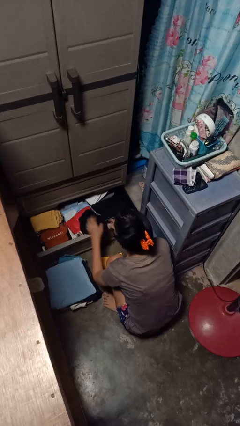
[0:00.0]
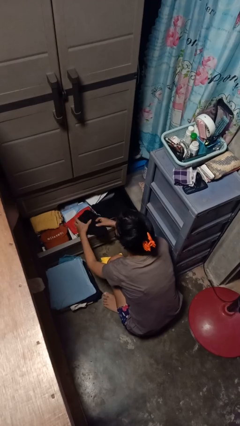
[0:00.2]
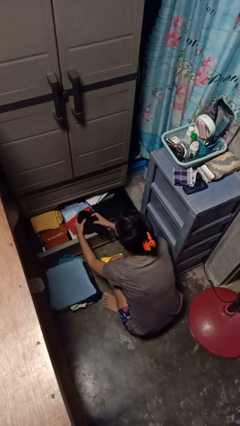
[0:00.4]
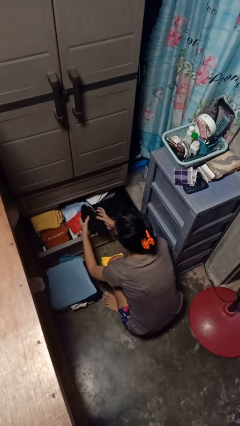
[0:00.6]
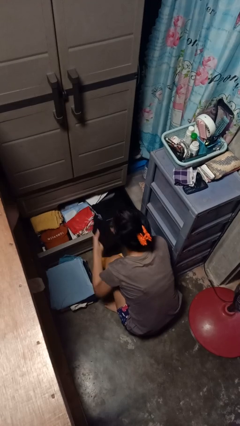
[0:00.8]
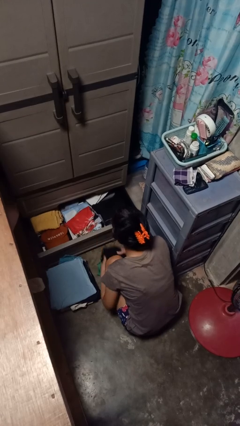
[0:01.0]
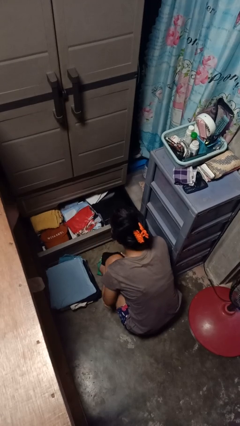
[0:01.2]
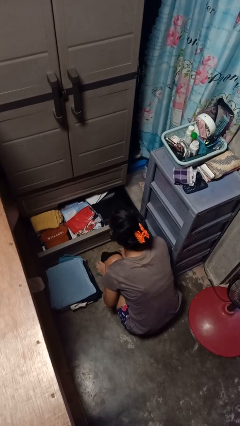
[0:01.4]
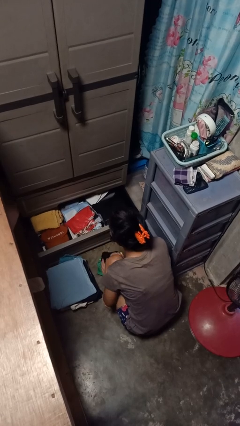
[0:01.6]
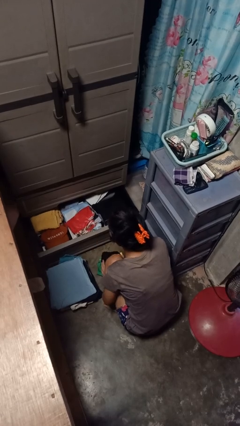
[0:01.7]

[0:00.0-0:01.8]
person takes clothes from dresser

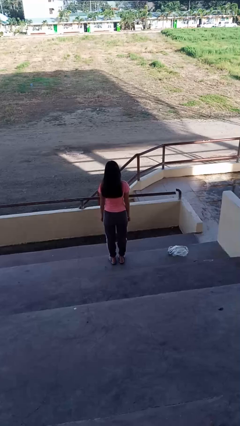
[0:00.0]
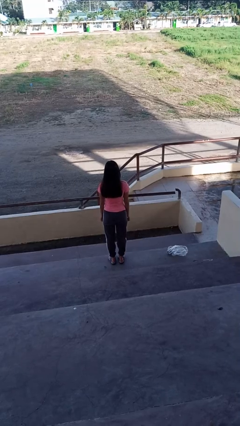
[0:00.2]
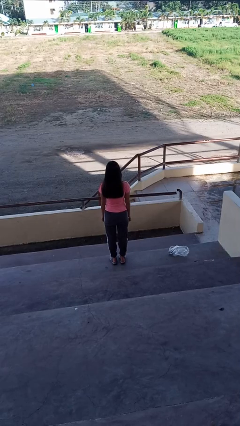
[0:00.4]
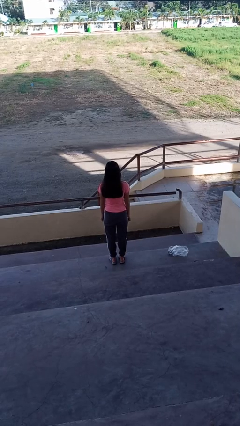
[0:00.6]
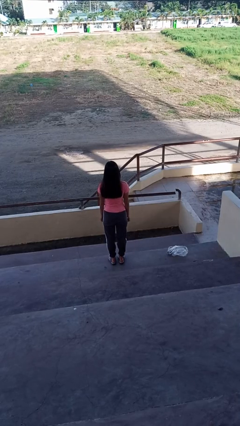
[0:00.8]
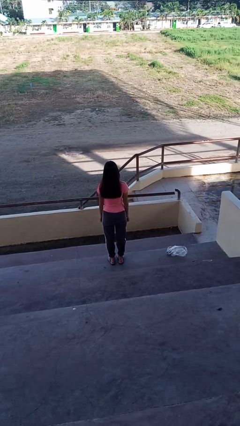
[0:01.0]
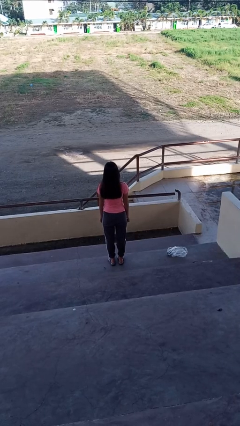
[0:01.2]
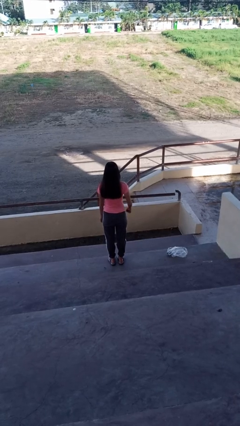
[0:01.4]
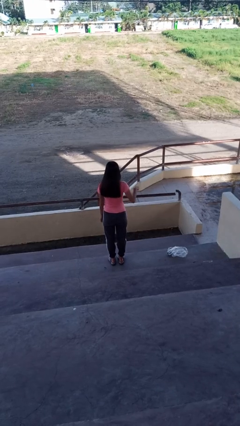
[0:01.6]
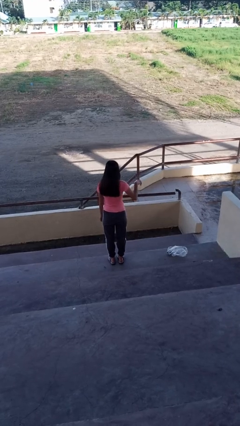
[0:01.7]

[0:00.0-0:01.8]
person drops object

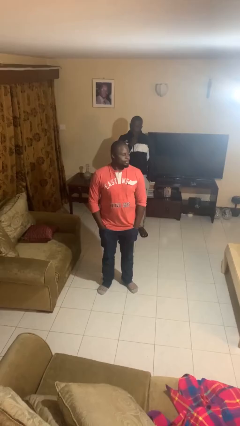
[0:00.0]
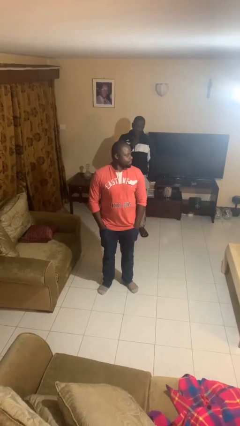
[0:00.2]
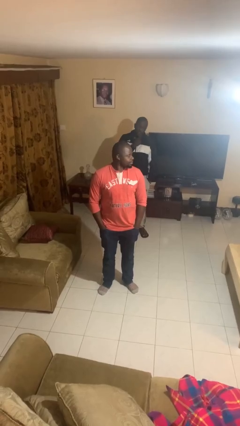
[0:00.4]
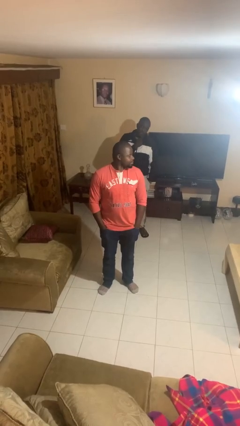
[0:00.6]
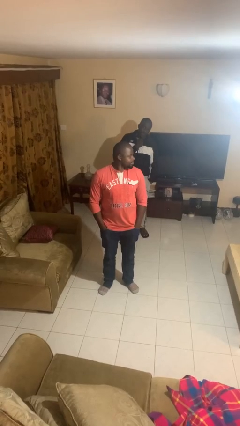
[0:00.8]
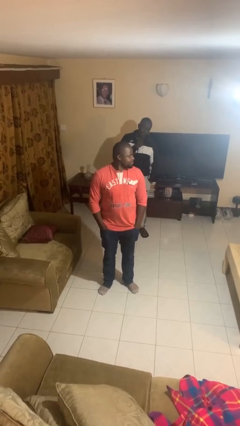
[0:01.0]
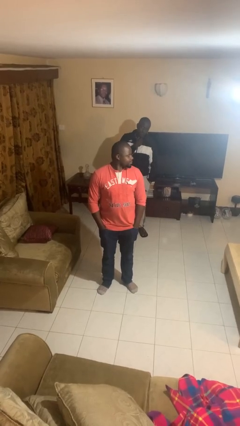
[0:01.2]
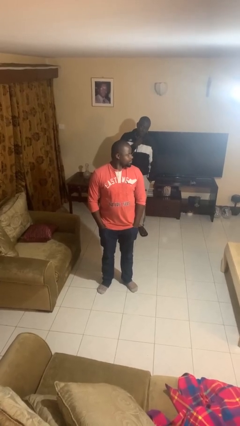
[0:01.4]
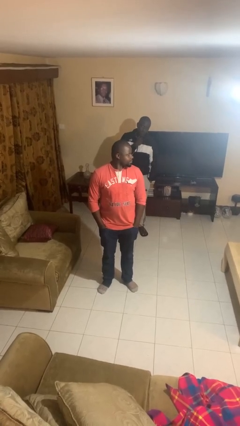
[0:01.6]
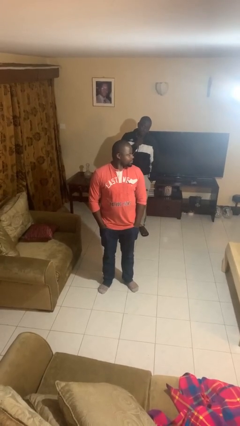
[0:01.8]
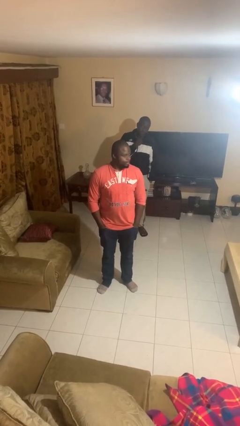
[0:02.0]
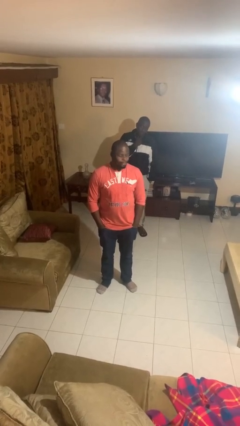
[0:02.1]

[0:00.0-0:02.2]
person looks over shoulder

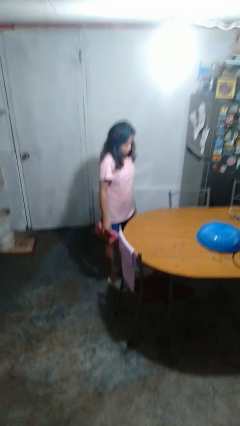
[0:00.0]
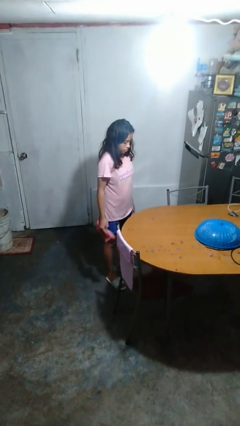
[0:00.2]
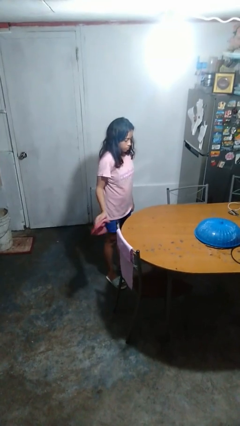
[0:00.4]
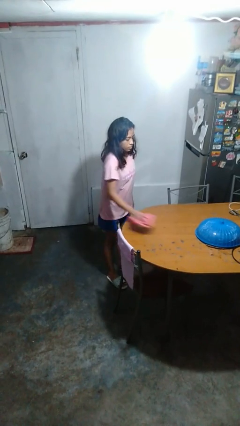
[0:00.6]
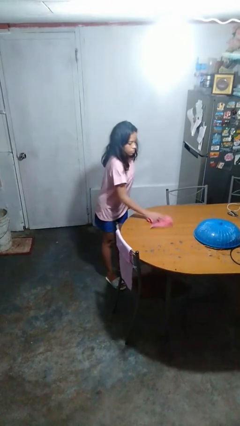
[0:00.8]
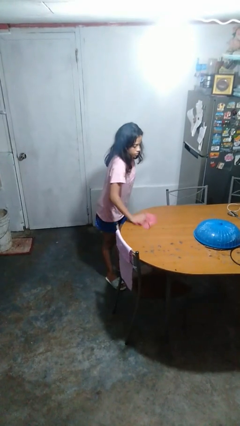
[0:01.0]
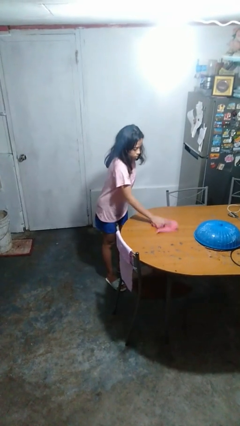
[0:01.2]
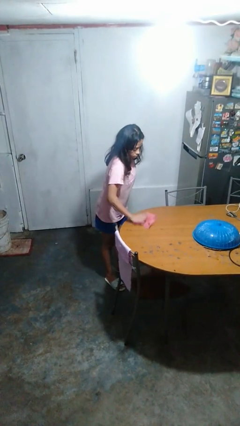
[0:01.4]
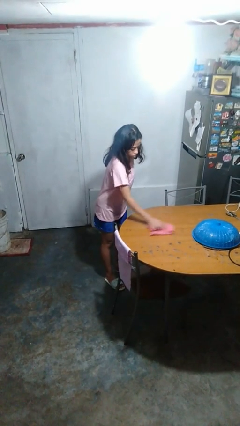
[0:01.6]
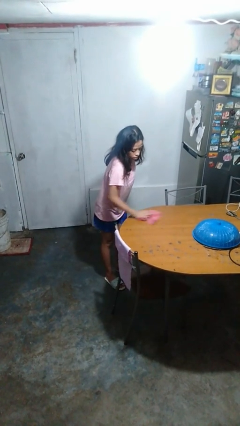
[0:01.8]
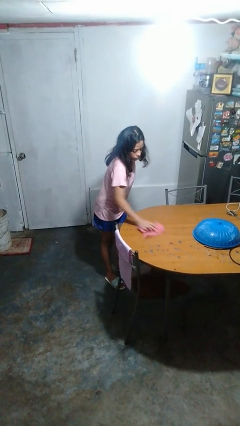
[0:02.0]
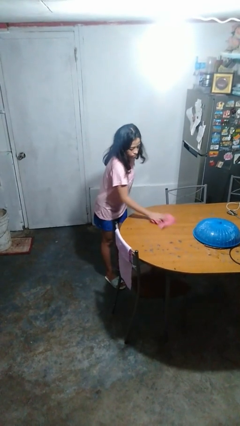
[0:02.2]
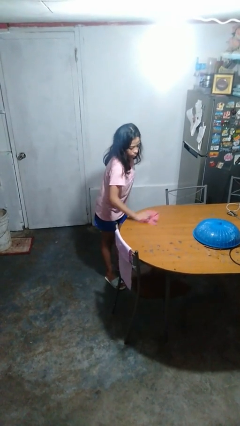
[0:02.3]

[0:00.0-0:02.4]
person cleans table with rag

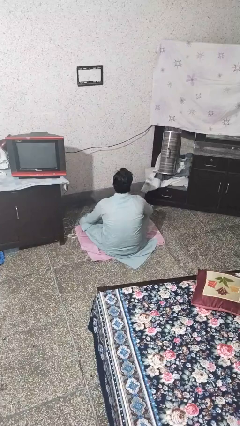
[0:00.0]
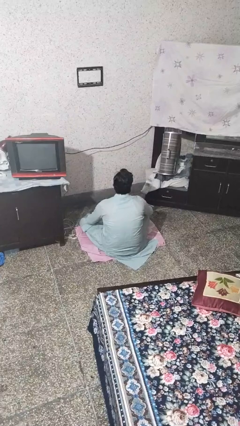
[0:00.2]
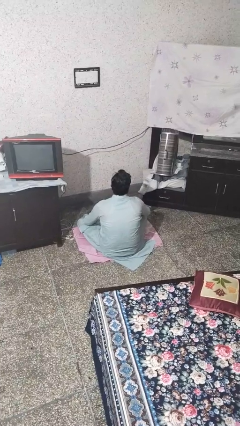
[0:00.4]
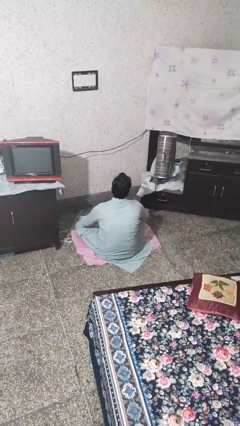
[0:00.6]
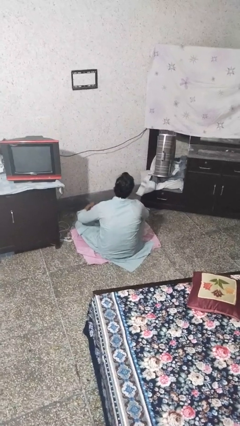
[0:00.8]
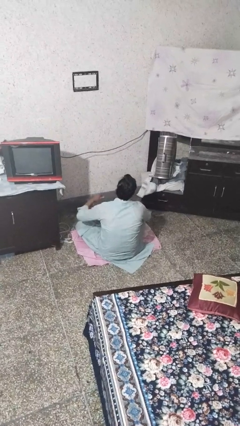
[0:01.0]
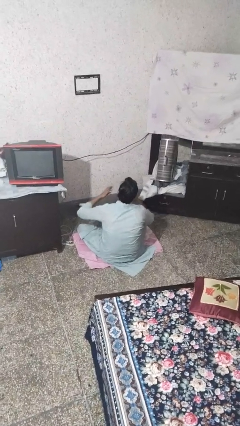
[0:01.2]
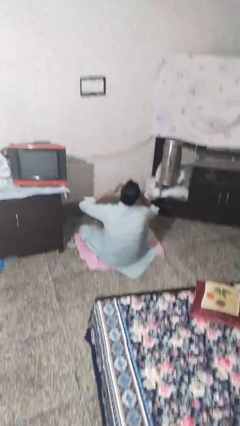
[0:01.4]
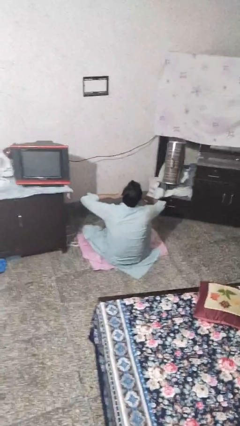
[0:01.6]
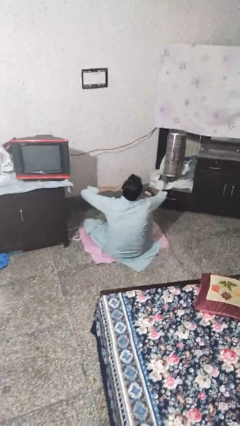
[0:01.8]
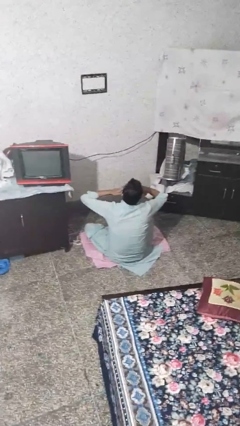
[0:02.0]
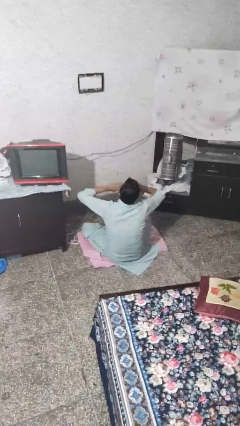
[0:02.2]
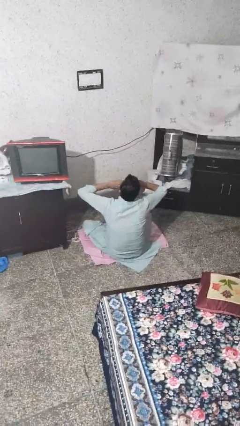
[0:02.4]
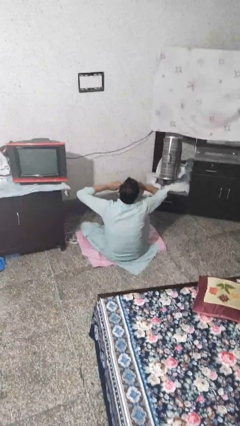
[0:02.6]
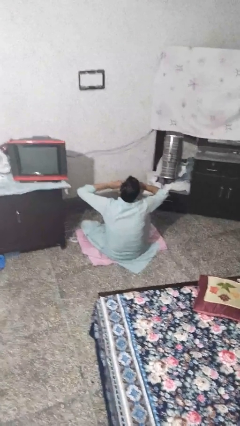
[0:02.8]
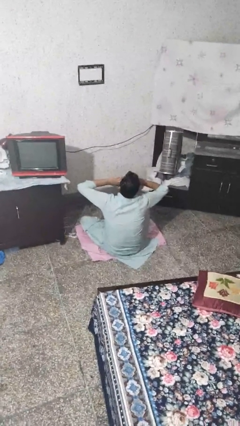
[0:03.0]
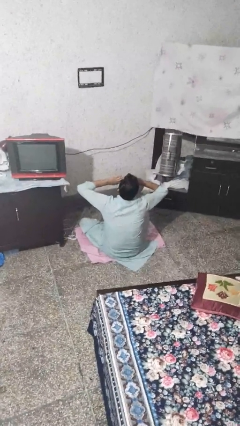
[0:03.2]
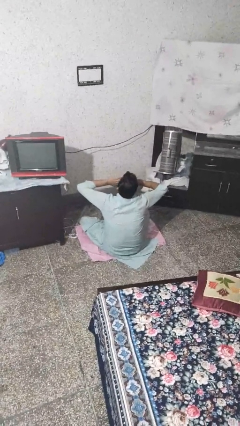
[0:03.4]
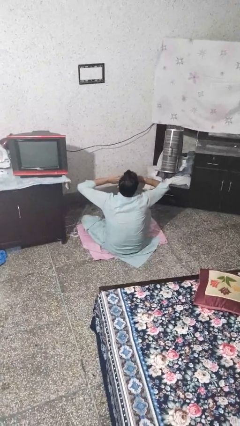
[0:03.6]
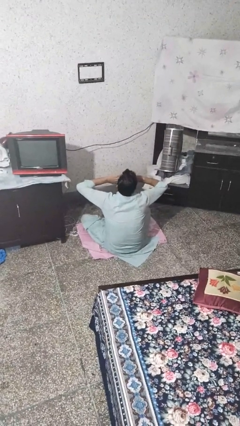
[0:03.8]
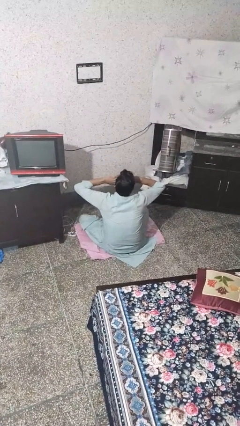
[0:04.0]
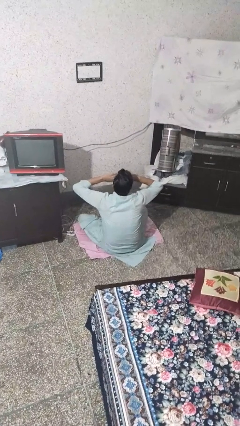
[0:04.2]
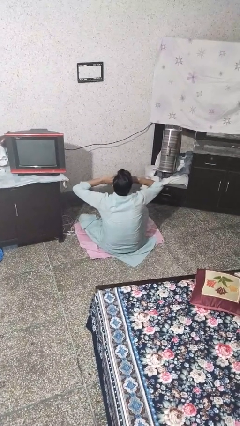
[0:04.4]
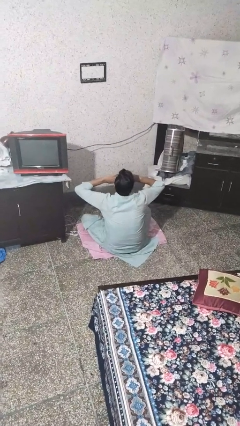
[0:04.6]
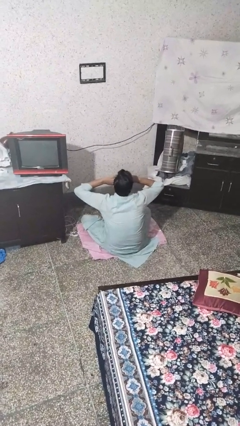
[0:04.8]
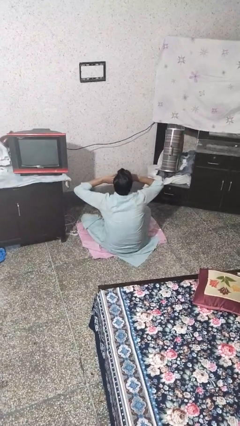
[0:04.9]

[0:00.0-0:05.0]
person yawns

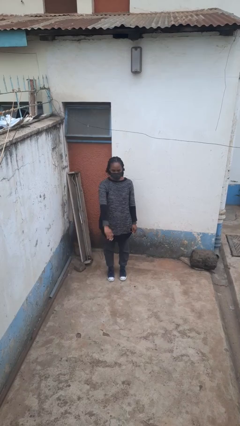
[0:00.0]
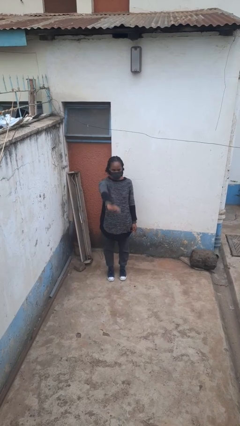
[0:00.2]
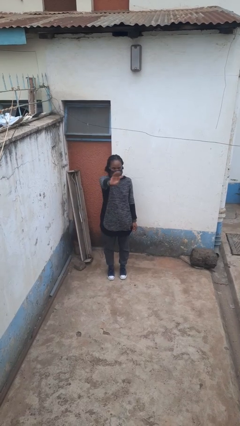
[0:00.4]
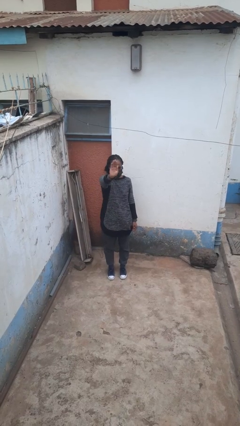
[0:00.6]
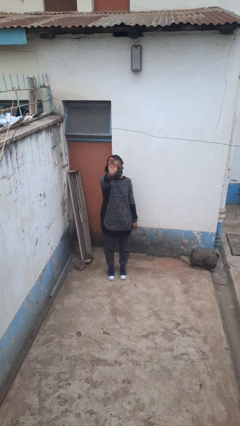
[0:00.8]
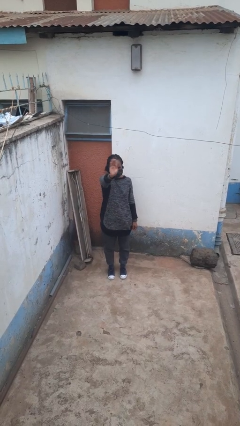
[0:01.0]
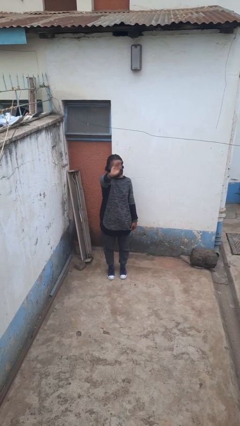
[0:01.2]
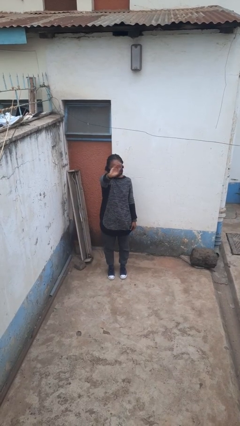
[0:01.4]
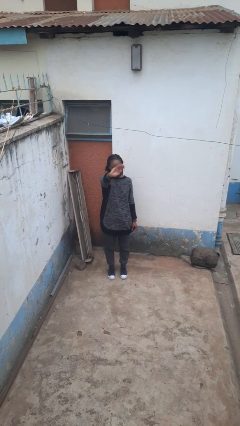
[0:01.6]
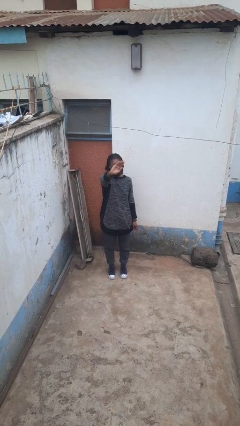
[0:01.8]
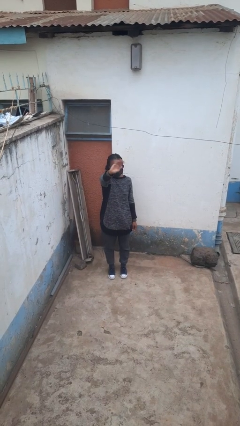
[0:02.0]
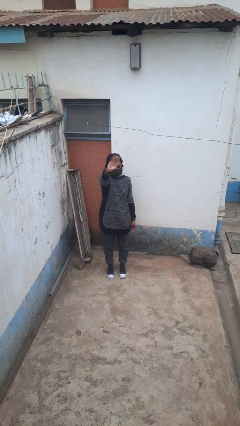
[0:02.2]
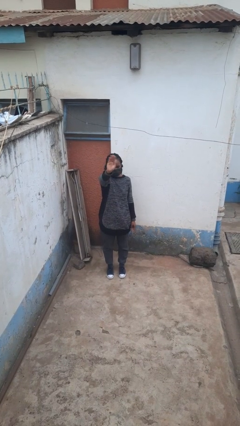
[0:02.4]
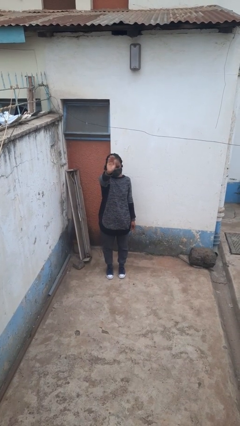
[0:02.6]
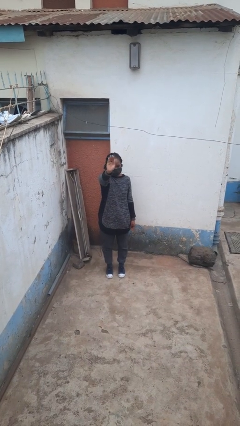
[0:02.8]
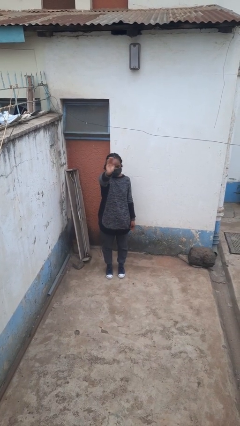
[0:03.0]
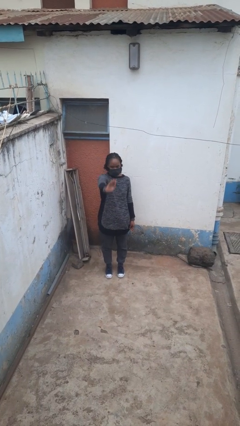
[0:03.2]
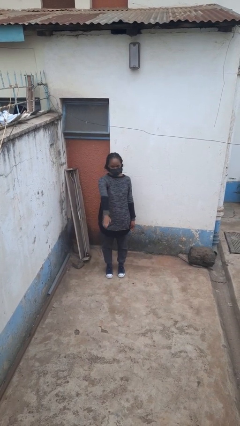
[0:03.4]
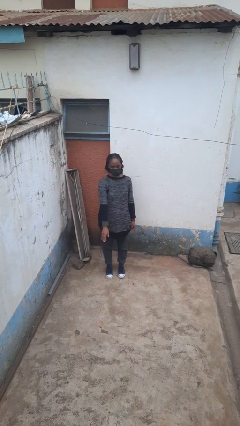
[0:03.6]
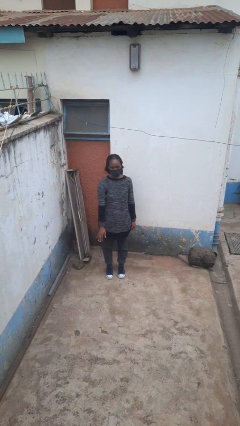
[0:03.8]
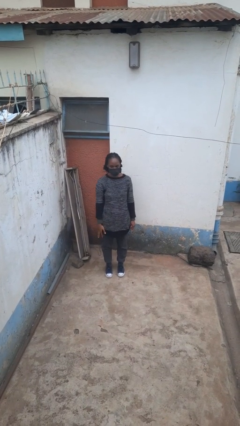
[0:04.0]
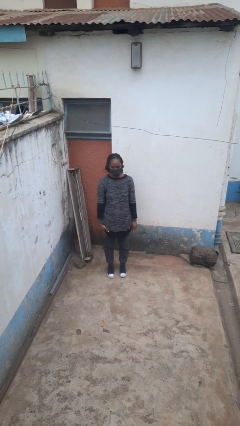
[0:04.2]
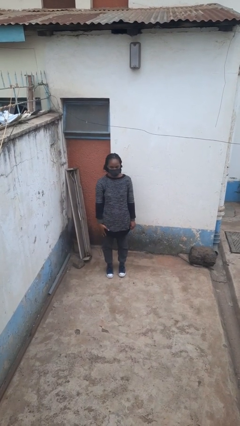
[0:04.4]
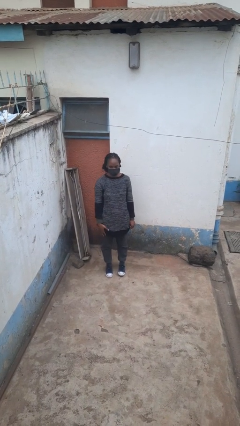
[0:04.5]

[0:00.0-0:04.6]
person waves at person
